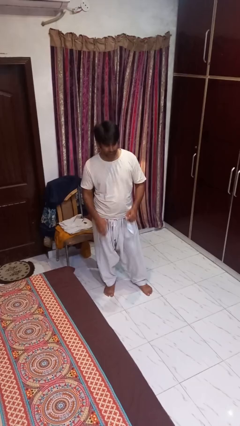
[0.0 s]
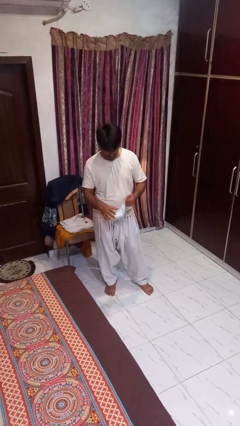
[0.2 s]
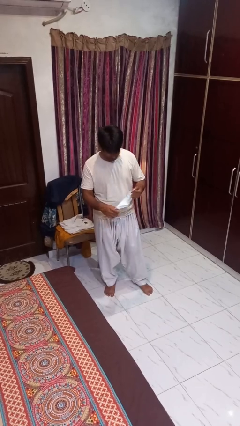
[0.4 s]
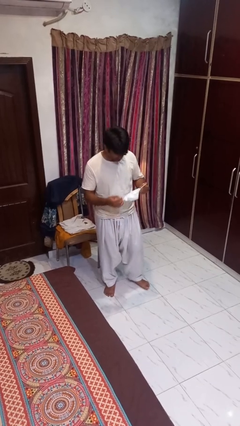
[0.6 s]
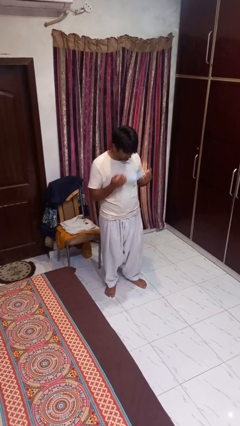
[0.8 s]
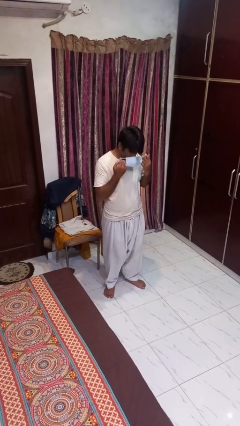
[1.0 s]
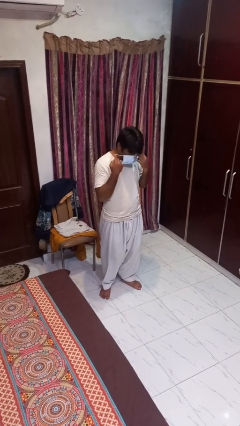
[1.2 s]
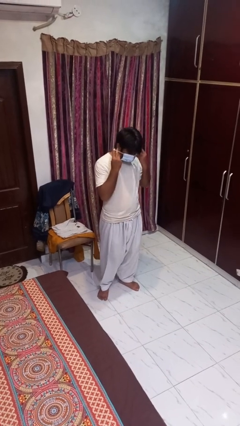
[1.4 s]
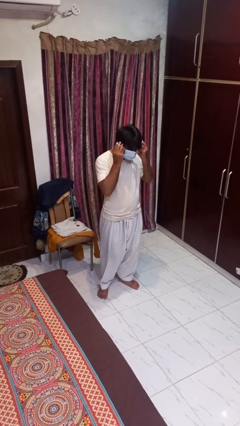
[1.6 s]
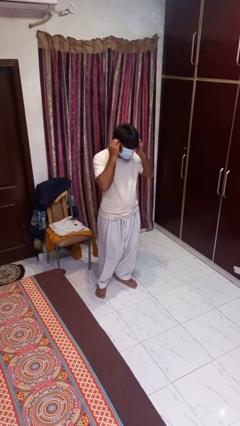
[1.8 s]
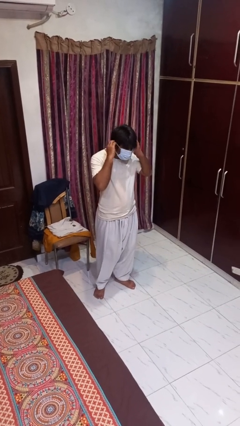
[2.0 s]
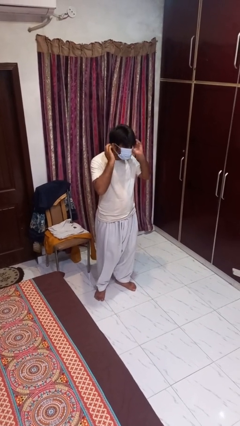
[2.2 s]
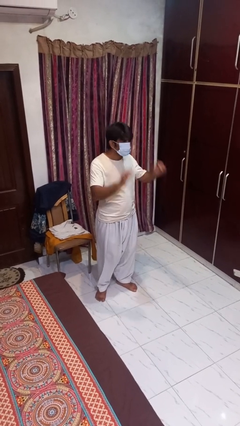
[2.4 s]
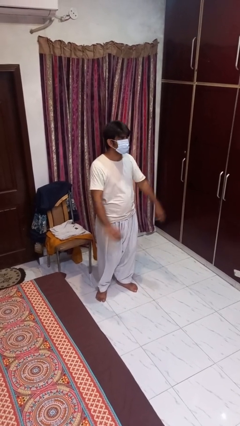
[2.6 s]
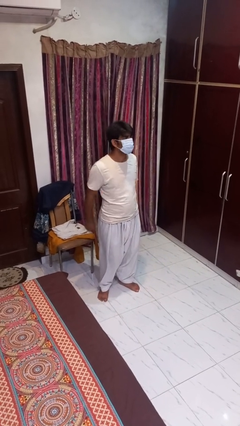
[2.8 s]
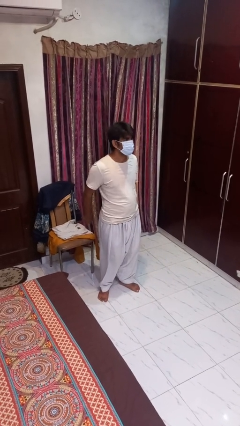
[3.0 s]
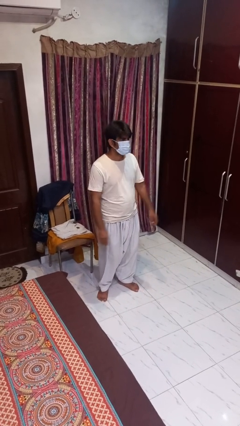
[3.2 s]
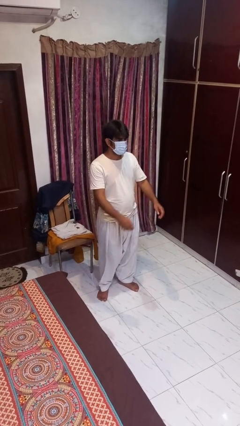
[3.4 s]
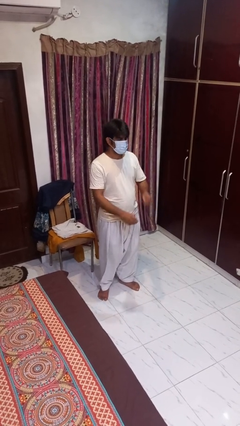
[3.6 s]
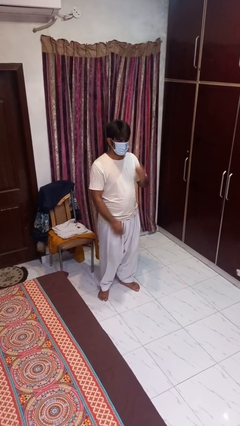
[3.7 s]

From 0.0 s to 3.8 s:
person puts on facemask

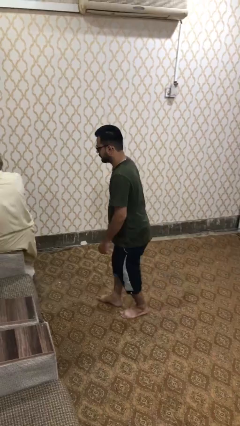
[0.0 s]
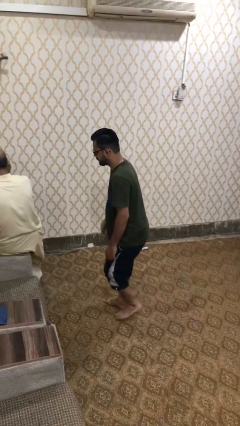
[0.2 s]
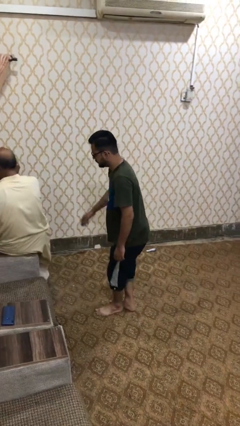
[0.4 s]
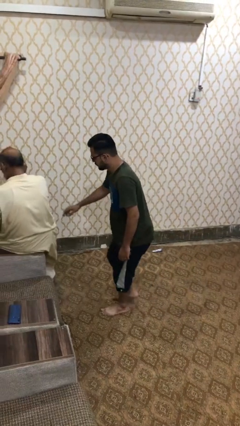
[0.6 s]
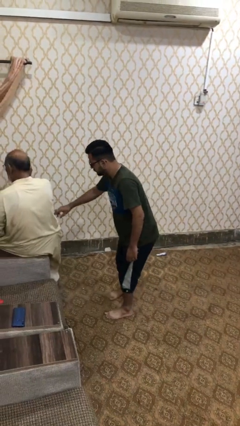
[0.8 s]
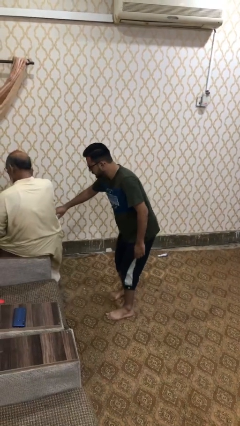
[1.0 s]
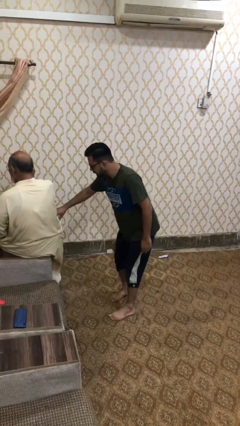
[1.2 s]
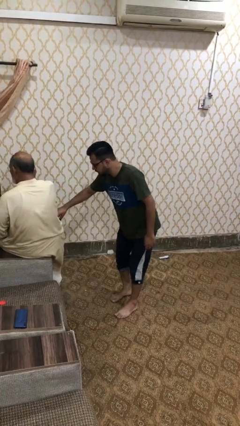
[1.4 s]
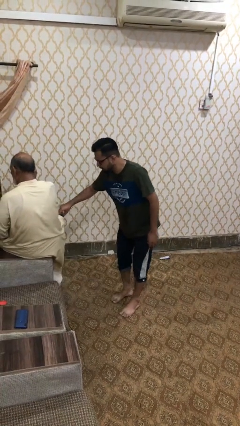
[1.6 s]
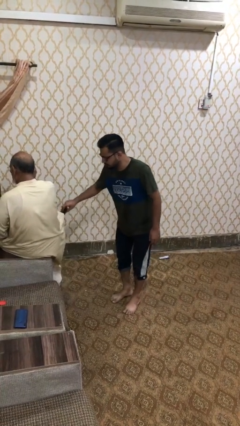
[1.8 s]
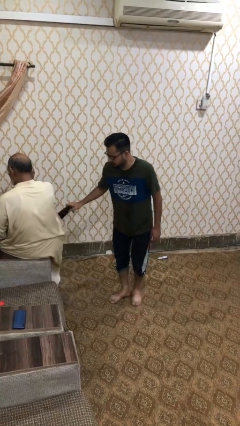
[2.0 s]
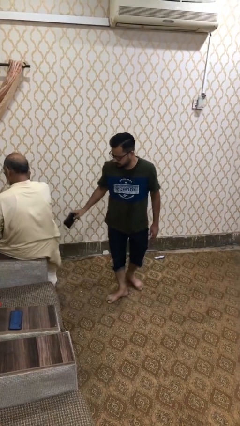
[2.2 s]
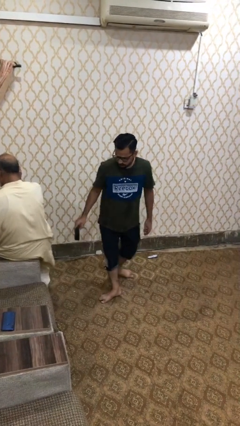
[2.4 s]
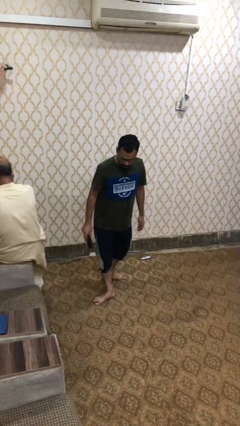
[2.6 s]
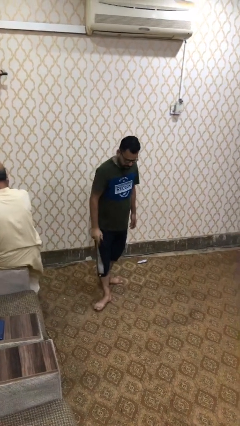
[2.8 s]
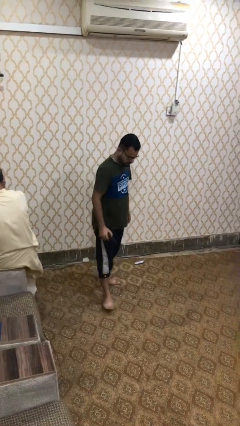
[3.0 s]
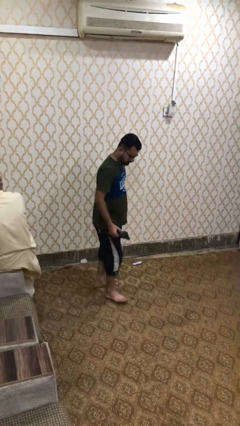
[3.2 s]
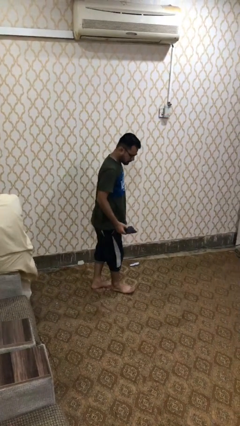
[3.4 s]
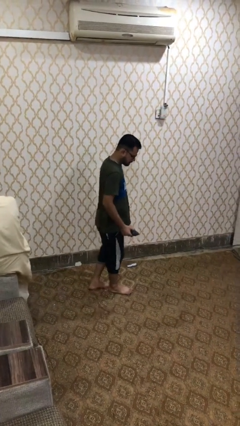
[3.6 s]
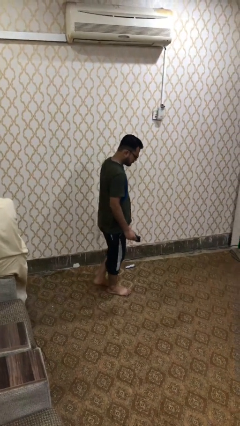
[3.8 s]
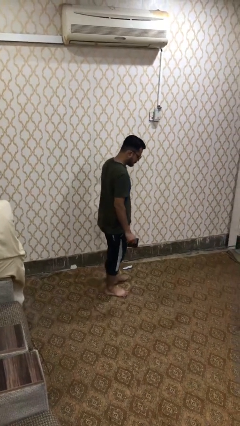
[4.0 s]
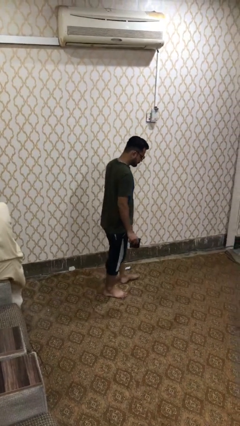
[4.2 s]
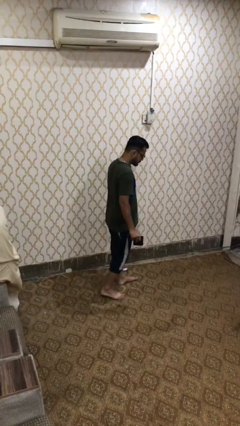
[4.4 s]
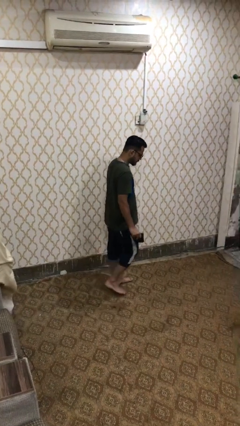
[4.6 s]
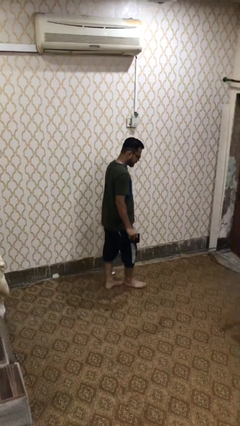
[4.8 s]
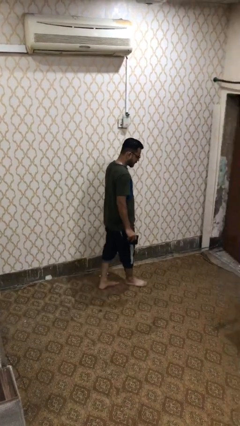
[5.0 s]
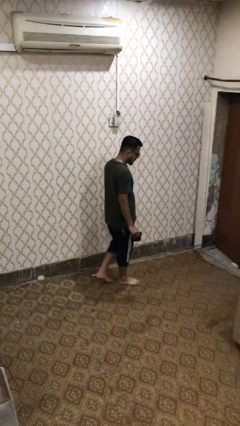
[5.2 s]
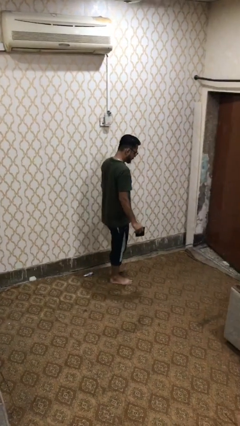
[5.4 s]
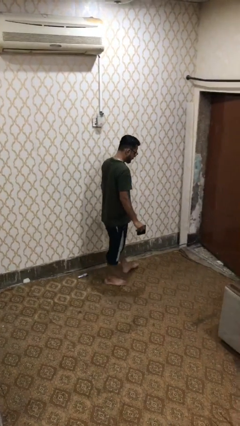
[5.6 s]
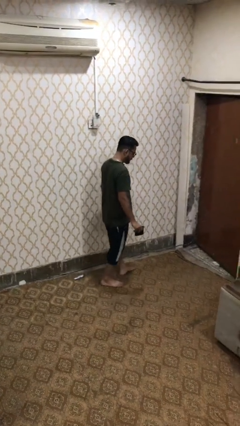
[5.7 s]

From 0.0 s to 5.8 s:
person steals object from person

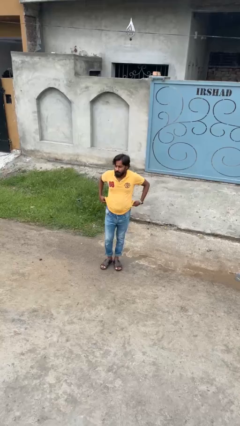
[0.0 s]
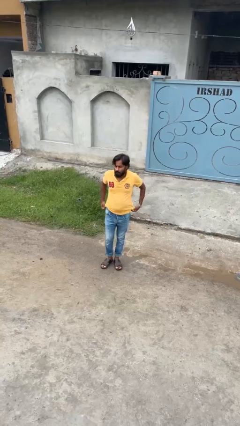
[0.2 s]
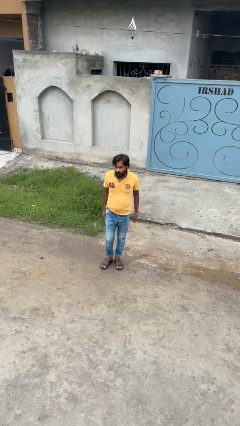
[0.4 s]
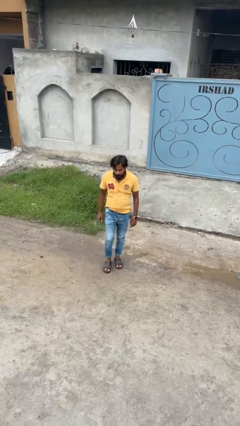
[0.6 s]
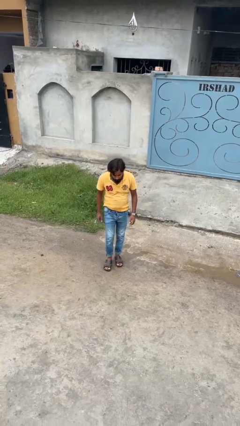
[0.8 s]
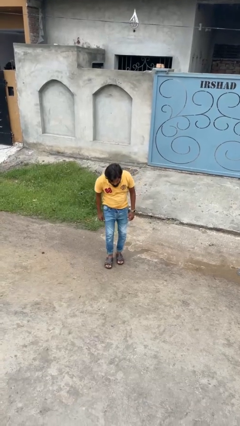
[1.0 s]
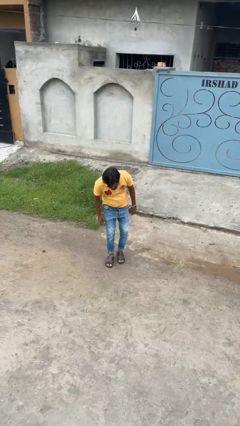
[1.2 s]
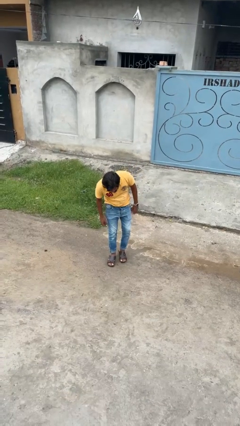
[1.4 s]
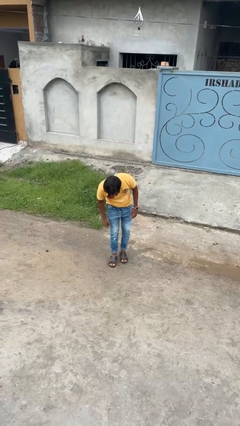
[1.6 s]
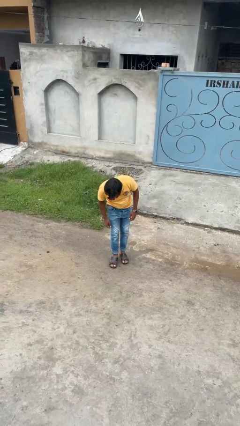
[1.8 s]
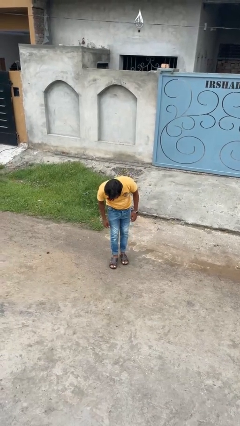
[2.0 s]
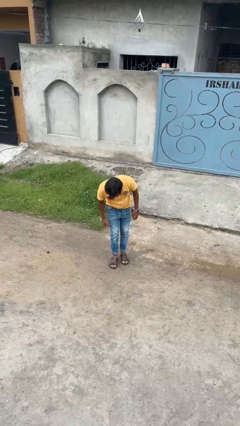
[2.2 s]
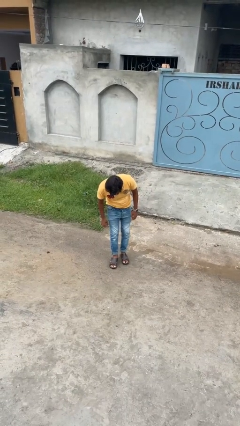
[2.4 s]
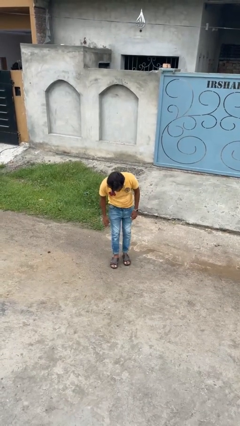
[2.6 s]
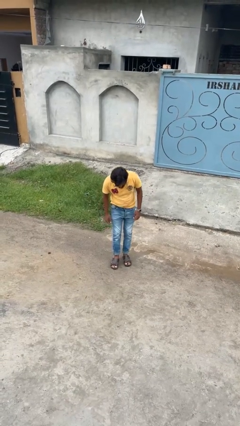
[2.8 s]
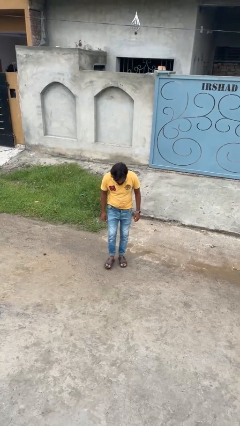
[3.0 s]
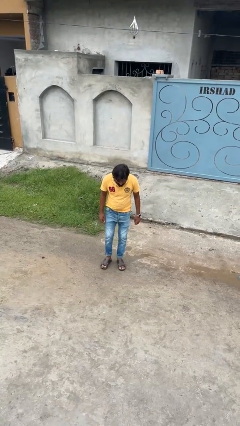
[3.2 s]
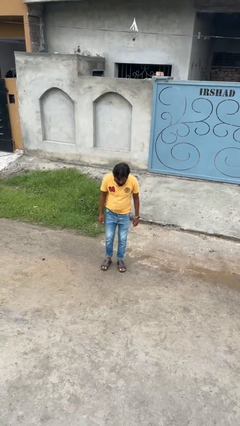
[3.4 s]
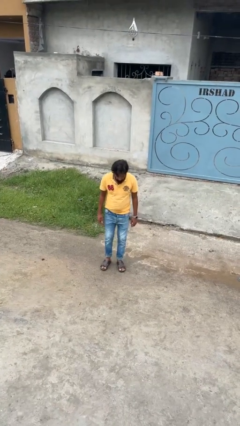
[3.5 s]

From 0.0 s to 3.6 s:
person bows

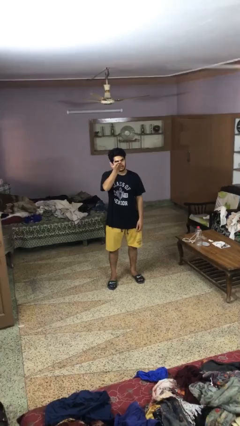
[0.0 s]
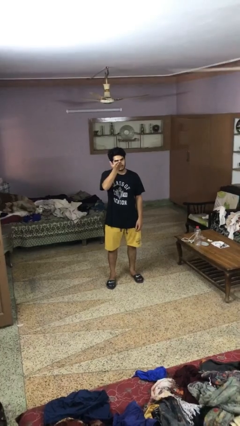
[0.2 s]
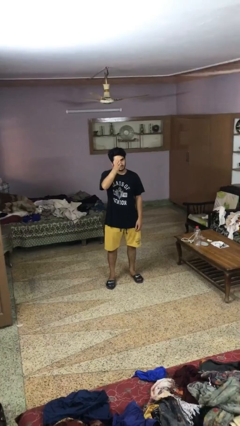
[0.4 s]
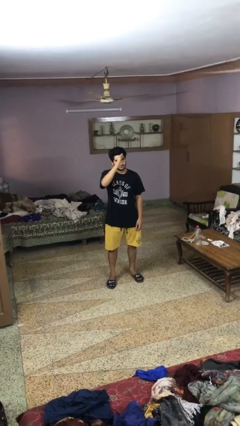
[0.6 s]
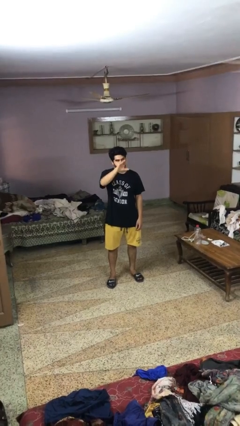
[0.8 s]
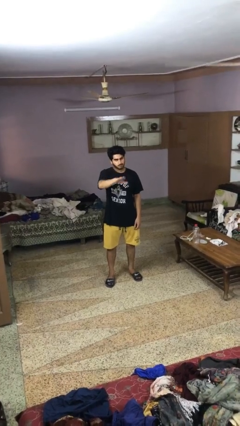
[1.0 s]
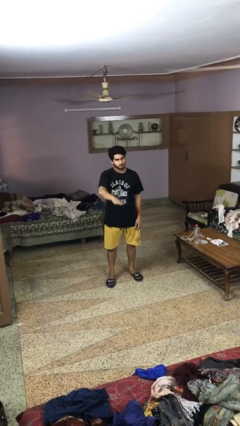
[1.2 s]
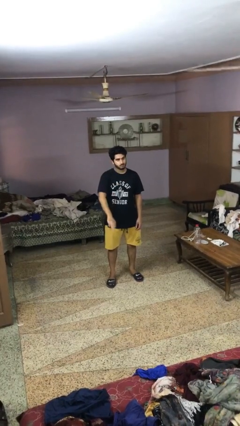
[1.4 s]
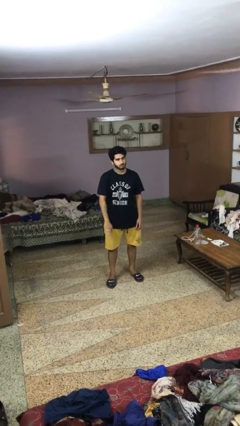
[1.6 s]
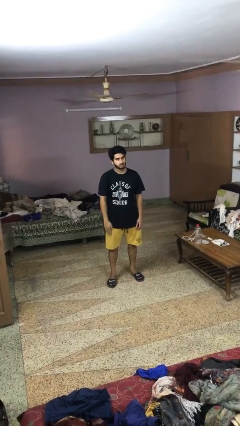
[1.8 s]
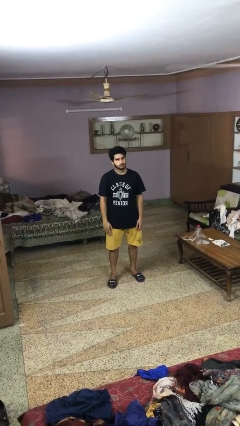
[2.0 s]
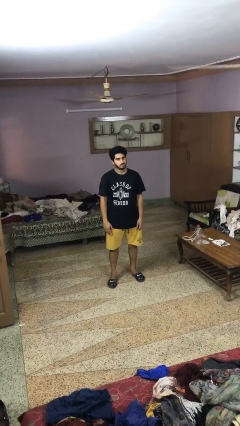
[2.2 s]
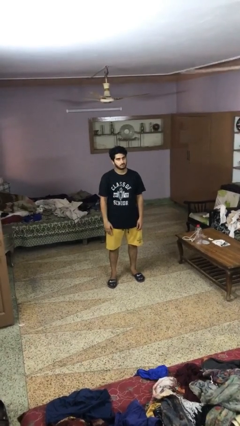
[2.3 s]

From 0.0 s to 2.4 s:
person gestures swipe down

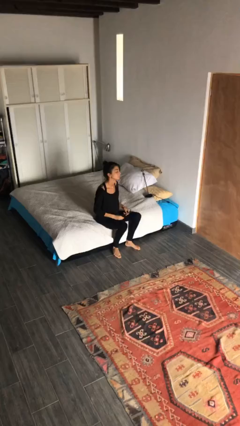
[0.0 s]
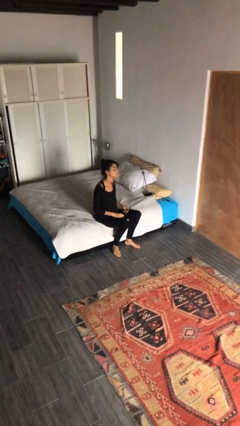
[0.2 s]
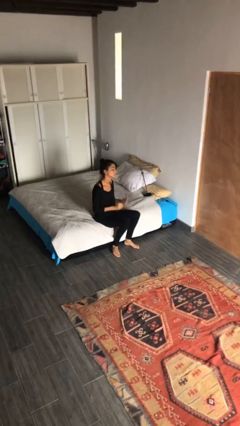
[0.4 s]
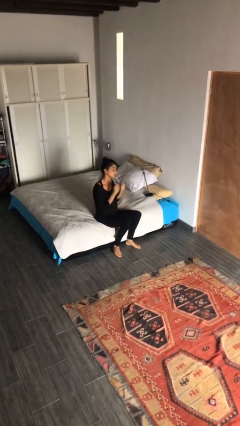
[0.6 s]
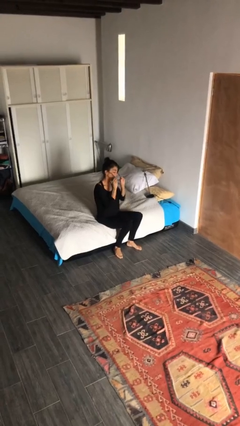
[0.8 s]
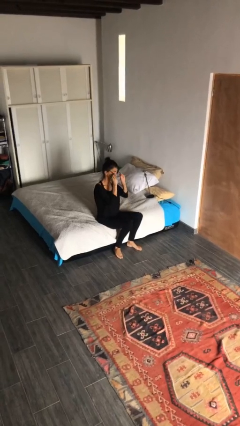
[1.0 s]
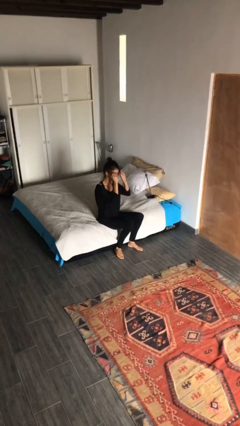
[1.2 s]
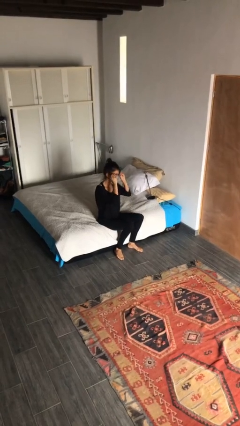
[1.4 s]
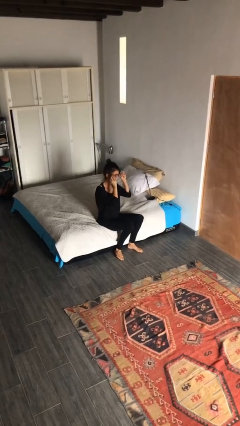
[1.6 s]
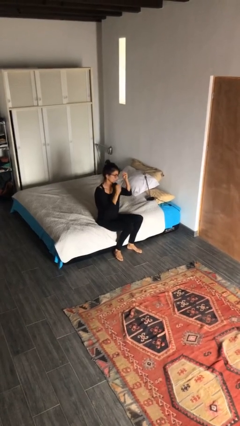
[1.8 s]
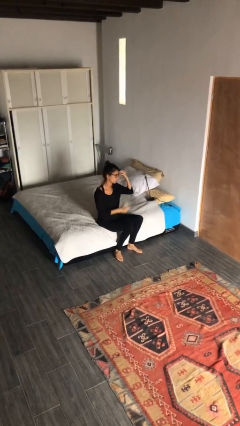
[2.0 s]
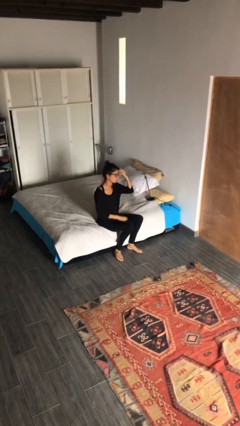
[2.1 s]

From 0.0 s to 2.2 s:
person puts on glasses
